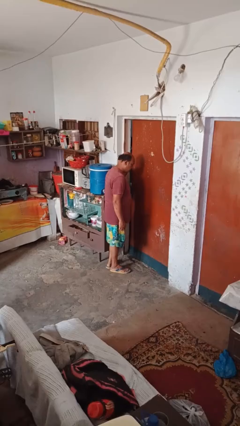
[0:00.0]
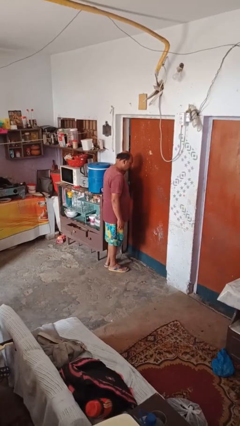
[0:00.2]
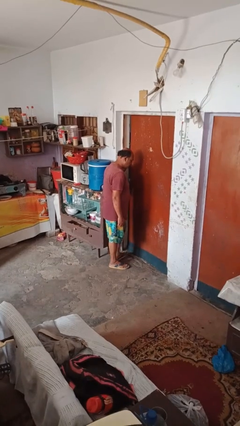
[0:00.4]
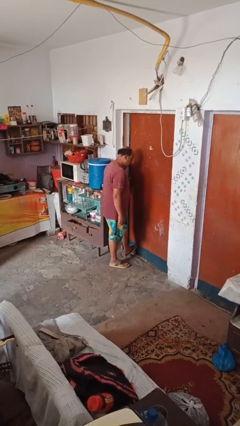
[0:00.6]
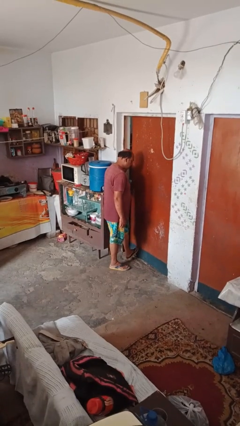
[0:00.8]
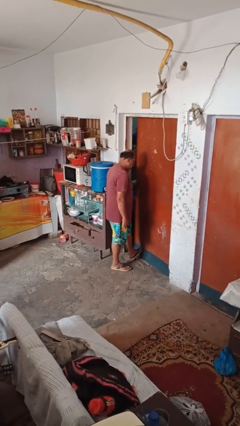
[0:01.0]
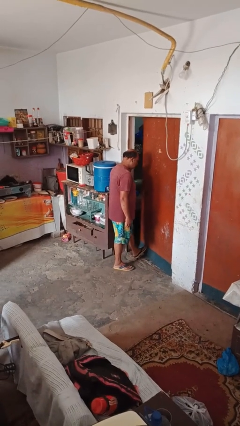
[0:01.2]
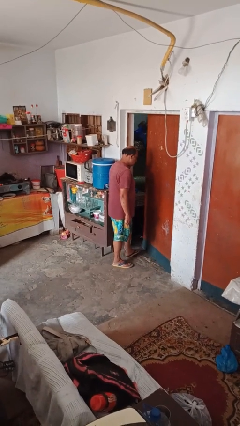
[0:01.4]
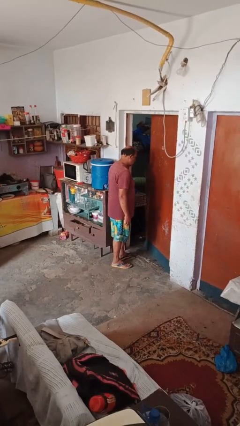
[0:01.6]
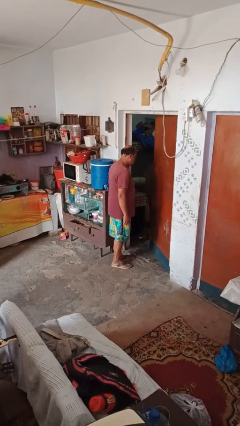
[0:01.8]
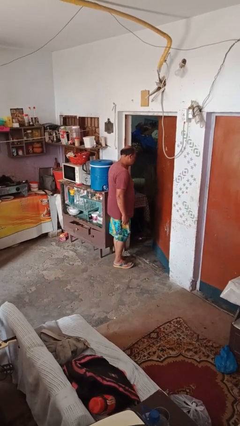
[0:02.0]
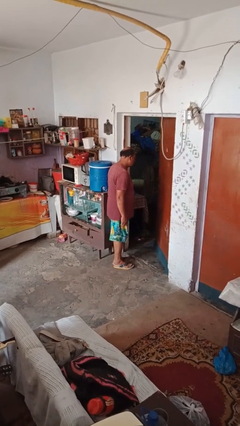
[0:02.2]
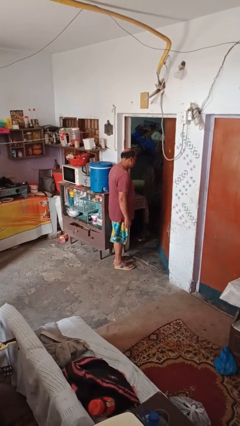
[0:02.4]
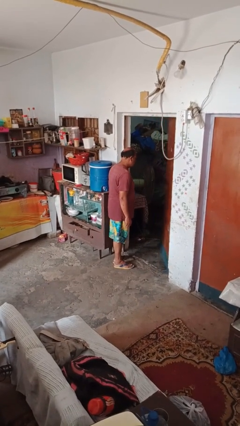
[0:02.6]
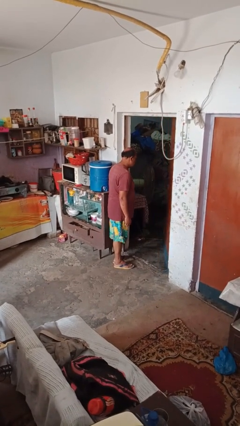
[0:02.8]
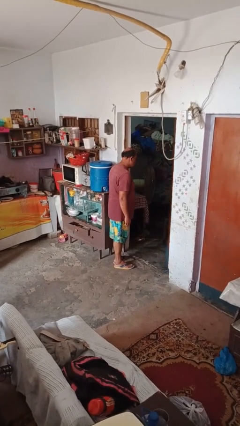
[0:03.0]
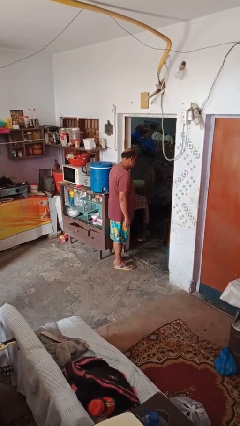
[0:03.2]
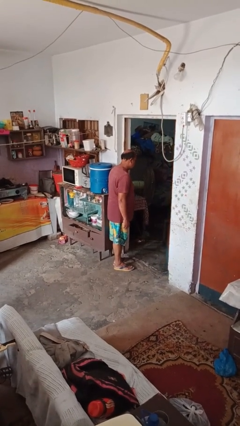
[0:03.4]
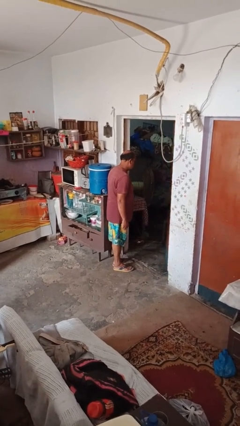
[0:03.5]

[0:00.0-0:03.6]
person opens facility door

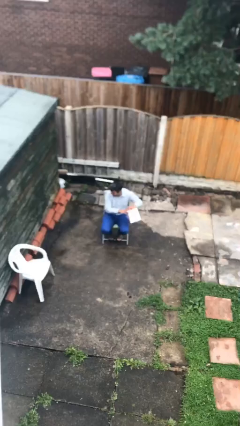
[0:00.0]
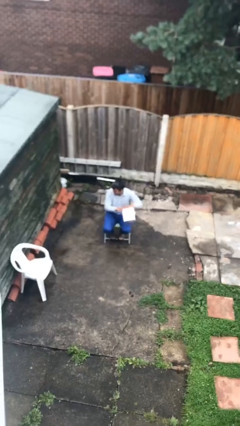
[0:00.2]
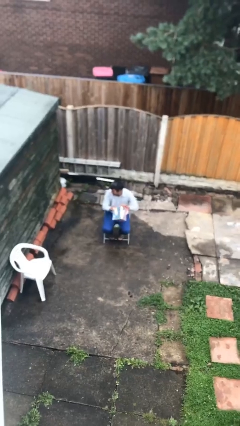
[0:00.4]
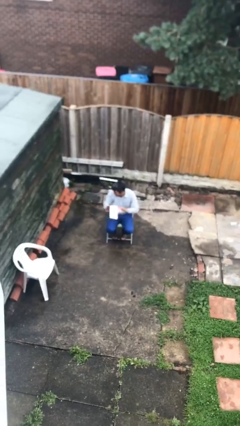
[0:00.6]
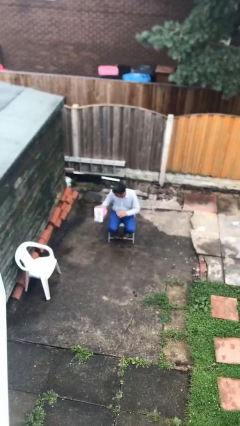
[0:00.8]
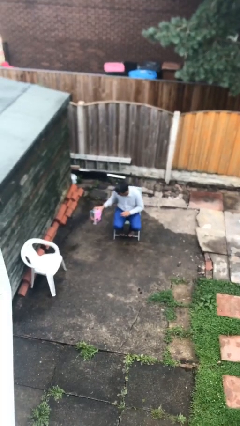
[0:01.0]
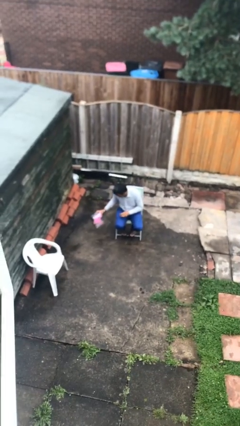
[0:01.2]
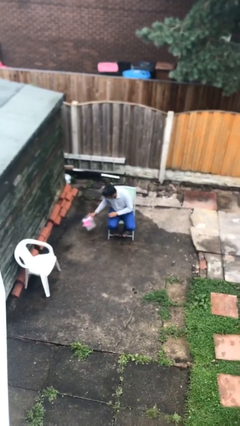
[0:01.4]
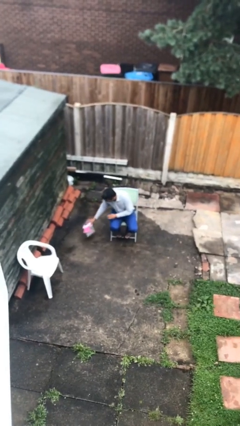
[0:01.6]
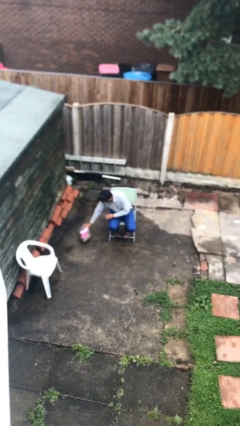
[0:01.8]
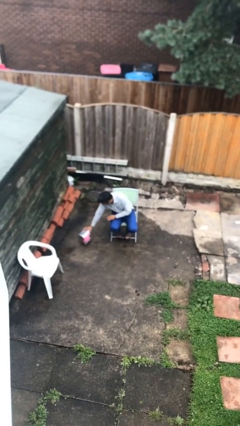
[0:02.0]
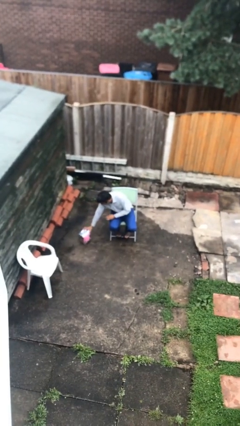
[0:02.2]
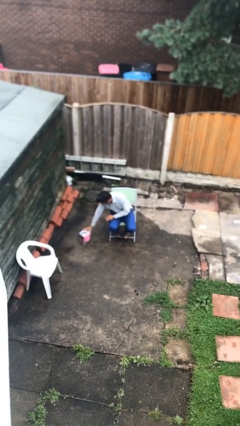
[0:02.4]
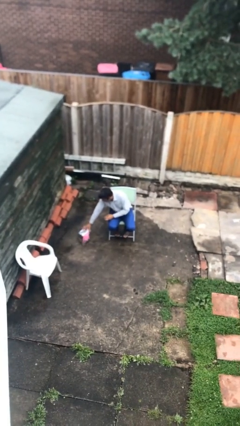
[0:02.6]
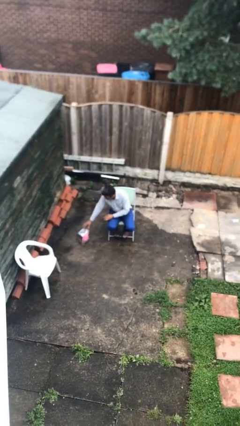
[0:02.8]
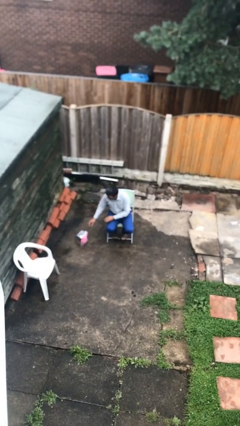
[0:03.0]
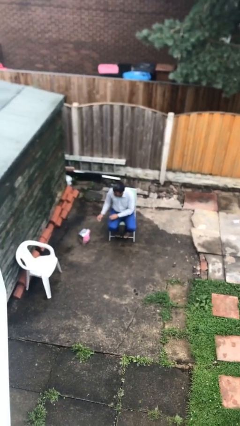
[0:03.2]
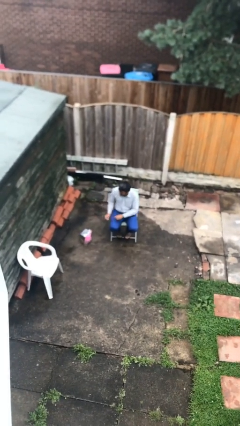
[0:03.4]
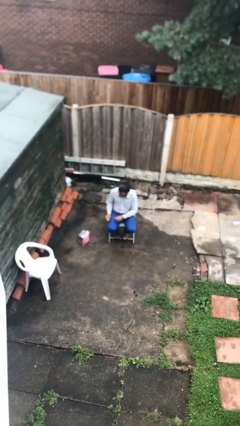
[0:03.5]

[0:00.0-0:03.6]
person puts down object on floor

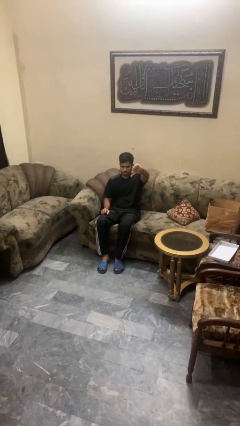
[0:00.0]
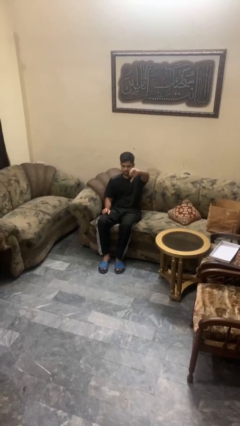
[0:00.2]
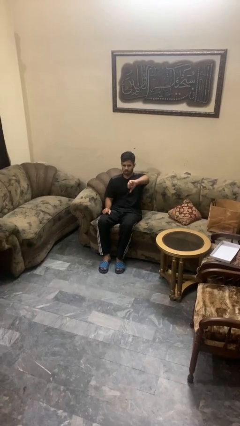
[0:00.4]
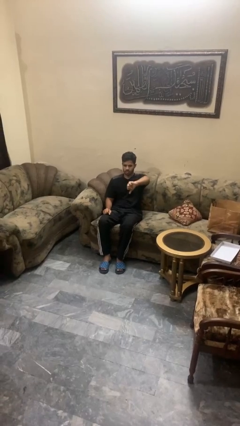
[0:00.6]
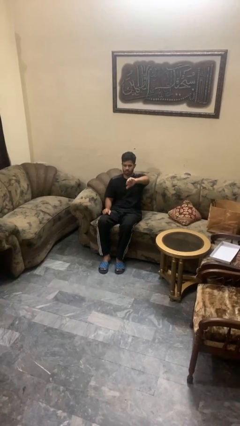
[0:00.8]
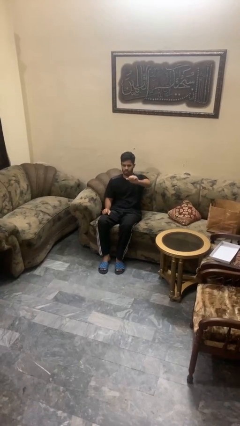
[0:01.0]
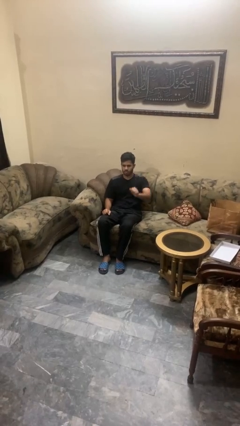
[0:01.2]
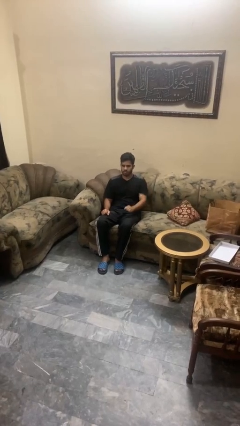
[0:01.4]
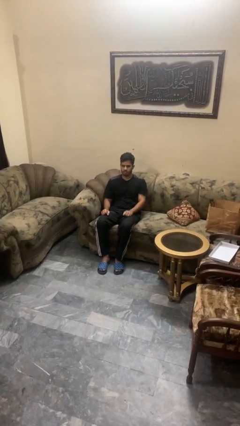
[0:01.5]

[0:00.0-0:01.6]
person gestures thumbs down

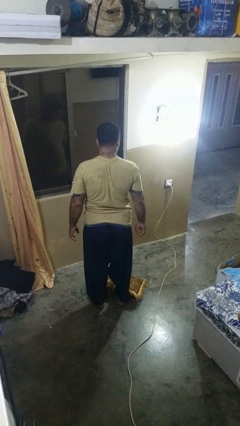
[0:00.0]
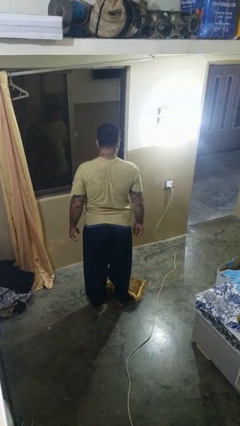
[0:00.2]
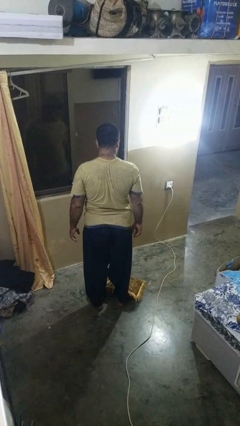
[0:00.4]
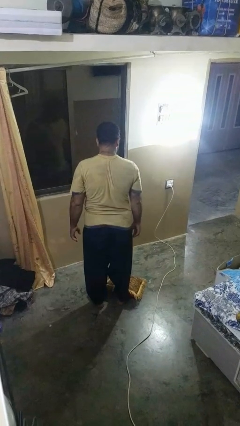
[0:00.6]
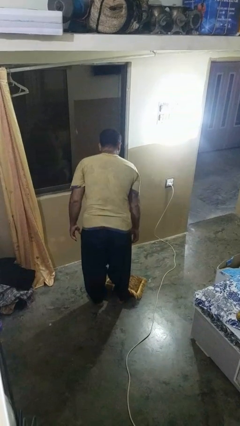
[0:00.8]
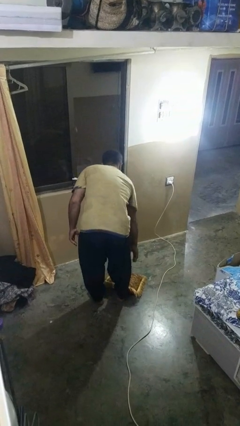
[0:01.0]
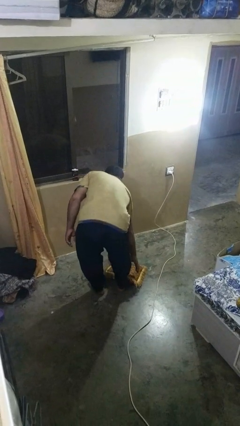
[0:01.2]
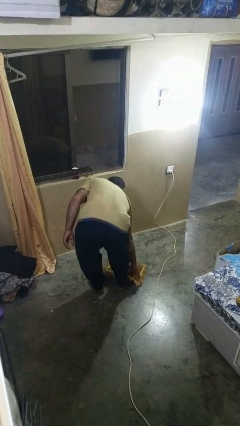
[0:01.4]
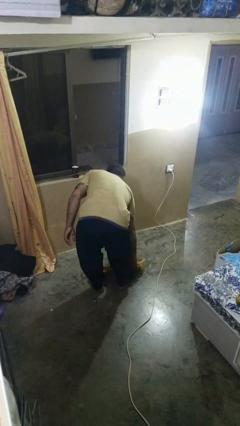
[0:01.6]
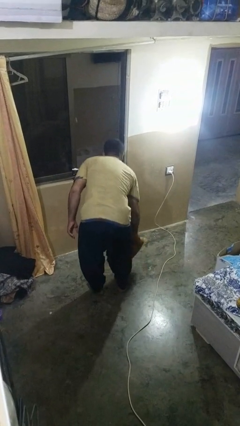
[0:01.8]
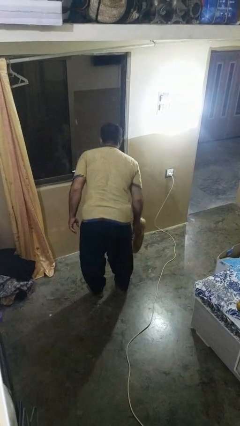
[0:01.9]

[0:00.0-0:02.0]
person picks up object from floor

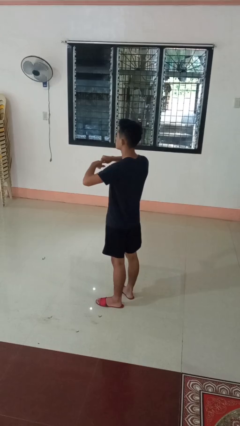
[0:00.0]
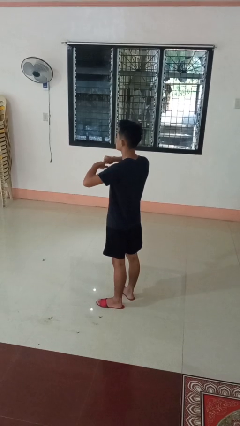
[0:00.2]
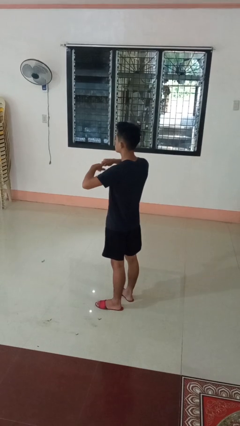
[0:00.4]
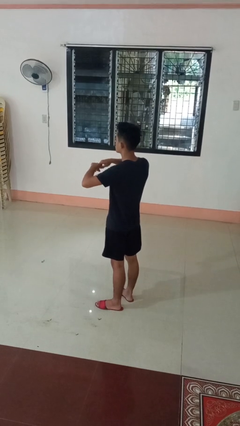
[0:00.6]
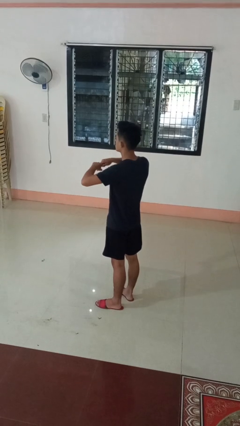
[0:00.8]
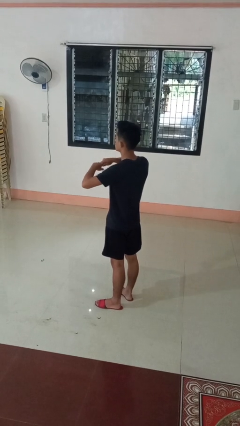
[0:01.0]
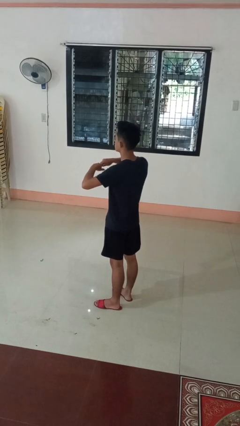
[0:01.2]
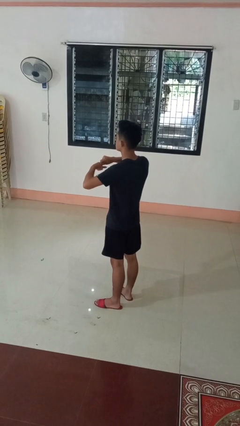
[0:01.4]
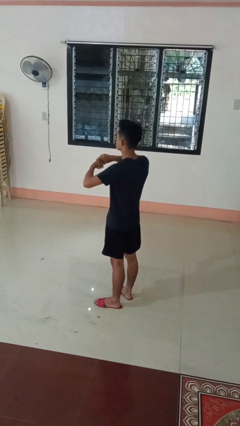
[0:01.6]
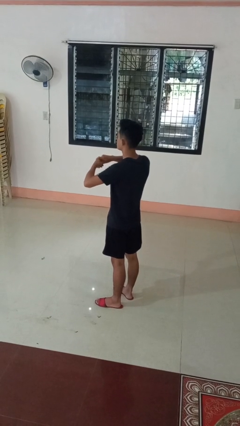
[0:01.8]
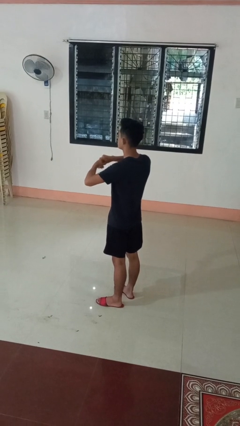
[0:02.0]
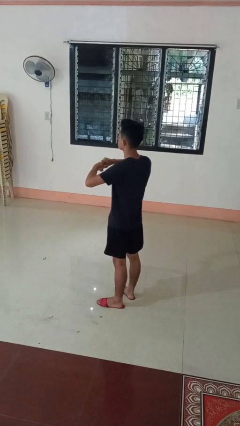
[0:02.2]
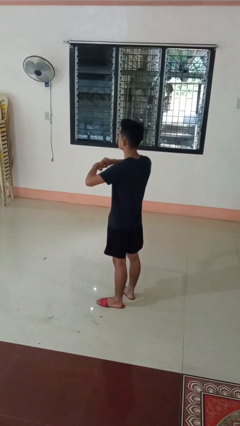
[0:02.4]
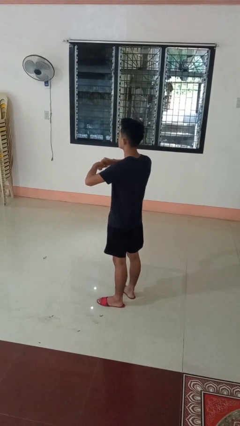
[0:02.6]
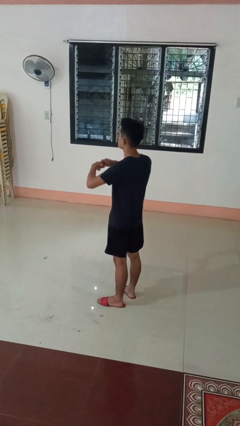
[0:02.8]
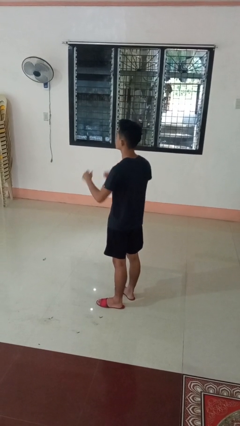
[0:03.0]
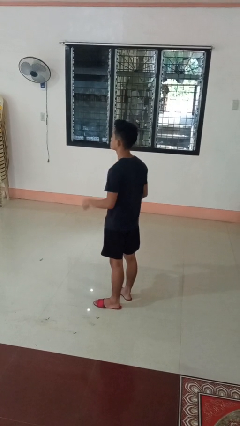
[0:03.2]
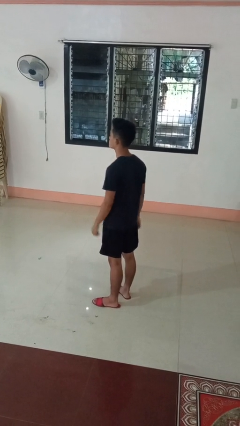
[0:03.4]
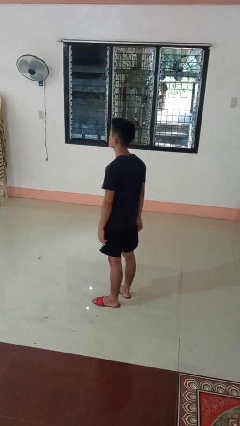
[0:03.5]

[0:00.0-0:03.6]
person cracks knuckles

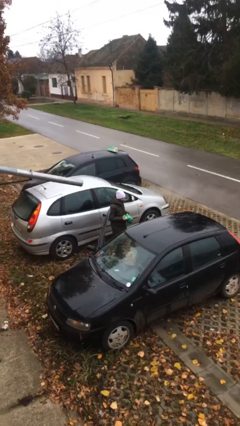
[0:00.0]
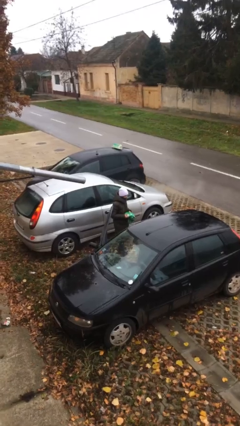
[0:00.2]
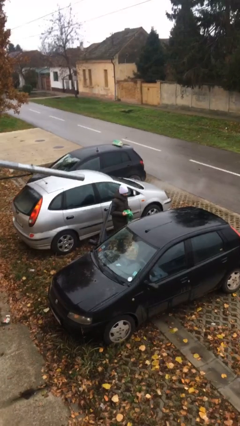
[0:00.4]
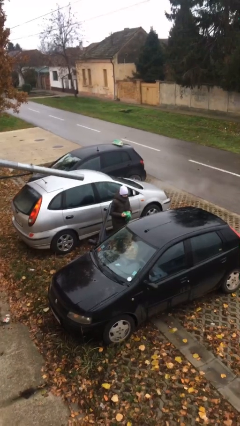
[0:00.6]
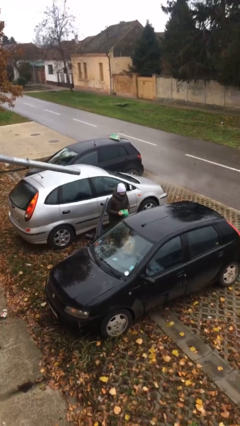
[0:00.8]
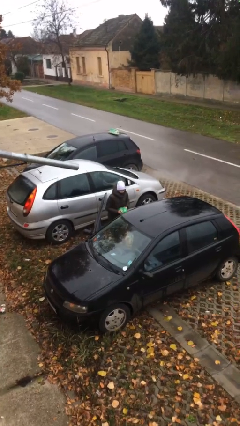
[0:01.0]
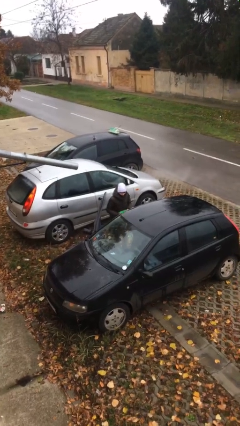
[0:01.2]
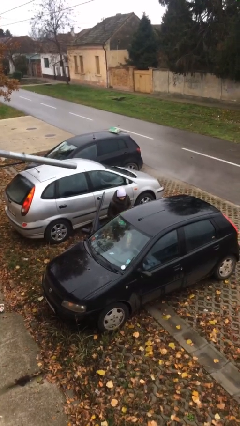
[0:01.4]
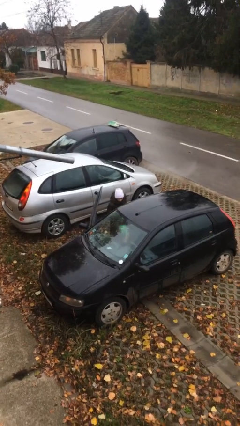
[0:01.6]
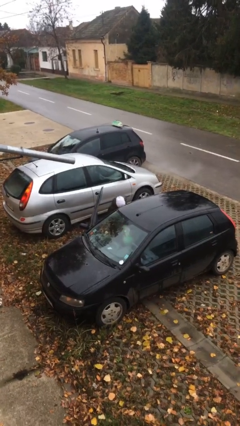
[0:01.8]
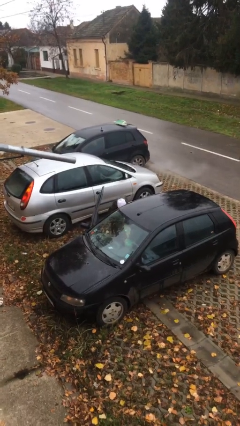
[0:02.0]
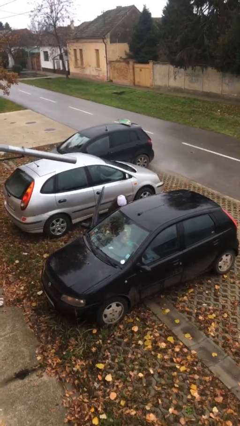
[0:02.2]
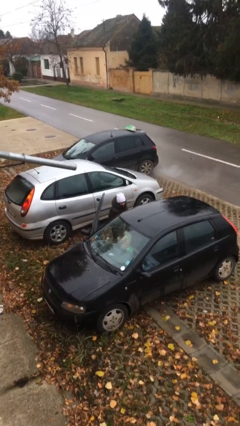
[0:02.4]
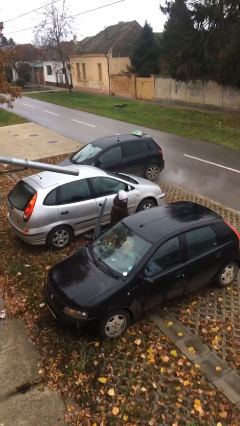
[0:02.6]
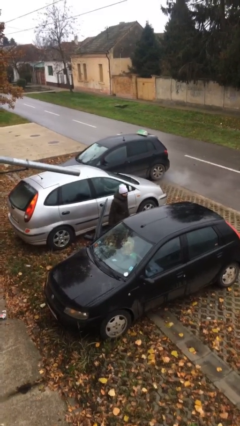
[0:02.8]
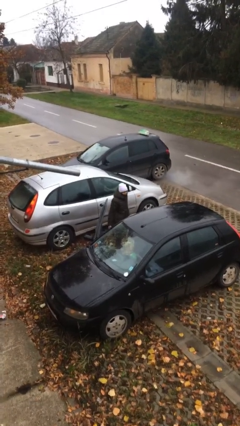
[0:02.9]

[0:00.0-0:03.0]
person loads car

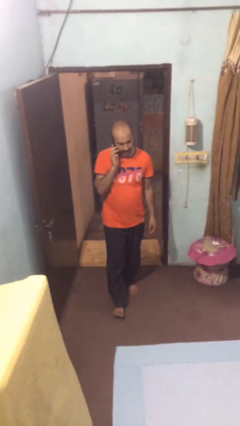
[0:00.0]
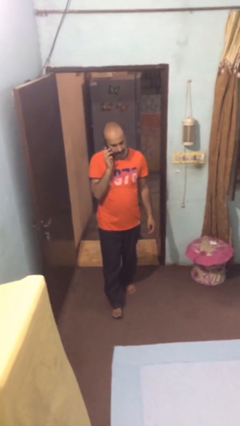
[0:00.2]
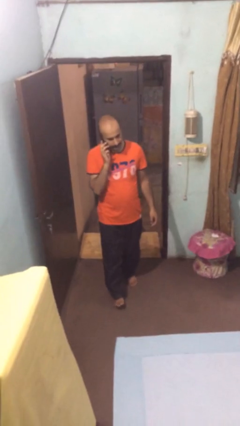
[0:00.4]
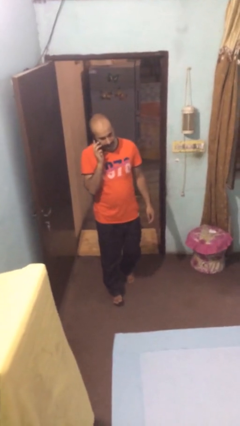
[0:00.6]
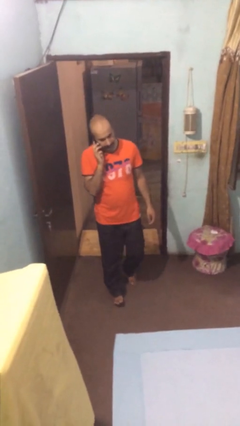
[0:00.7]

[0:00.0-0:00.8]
person enters scene through structure
